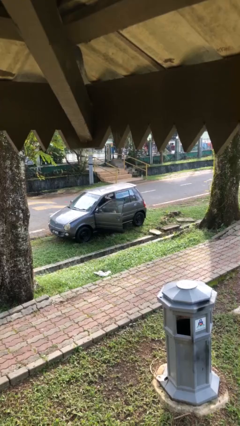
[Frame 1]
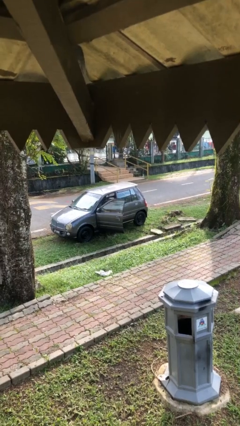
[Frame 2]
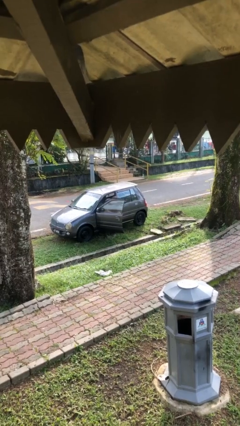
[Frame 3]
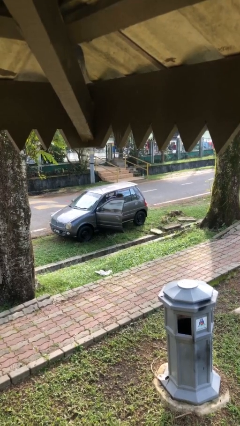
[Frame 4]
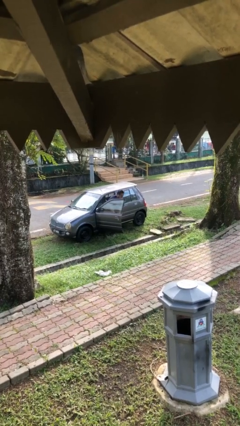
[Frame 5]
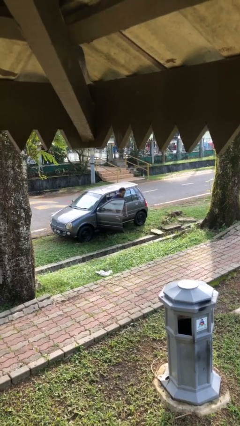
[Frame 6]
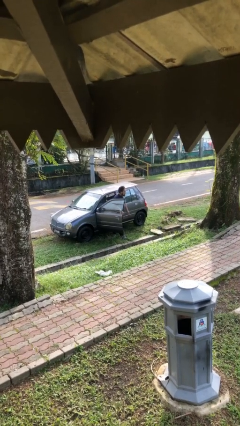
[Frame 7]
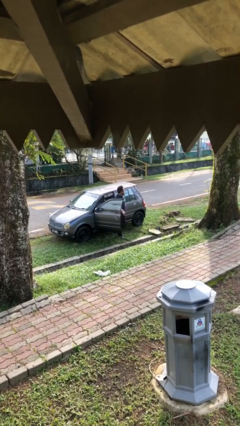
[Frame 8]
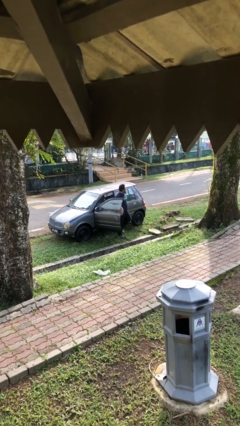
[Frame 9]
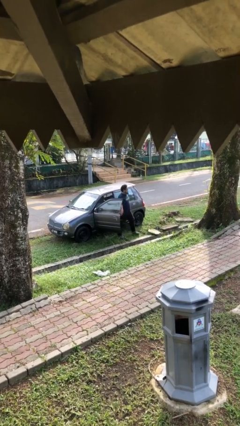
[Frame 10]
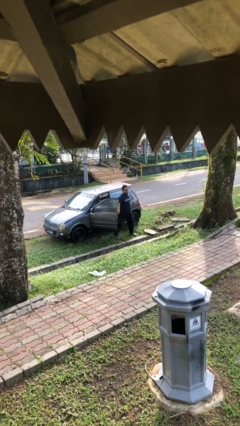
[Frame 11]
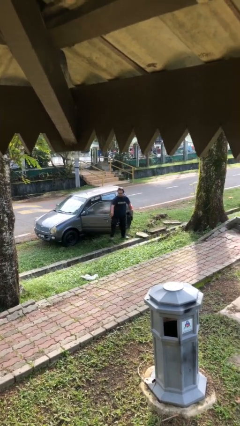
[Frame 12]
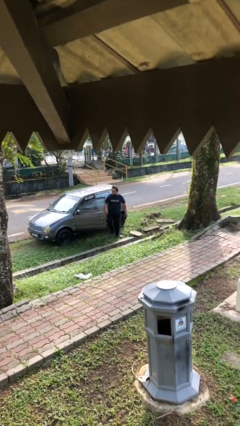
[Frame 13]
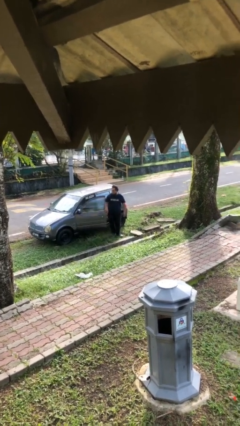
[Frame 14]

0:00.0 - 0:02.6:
person exits car

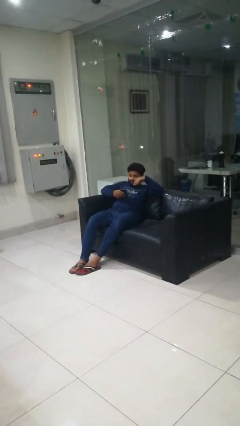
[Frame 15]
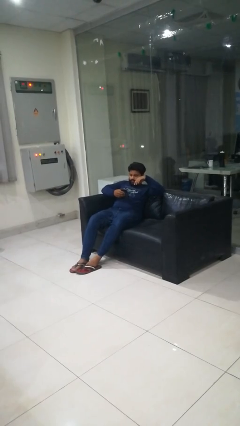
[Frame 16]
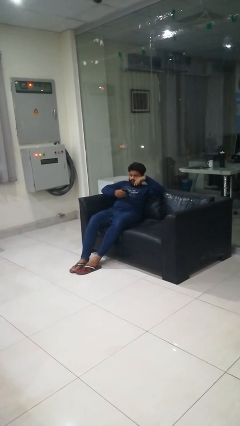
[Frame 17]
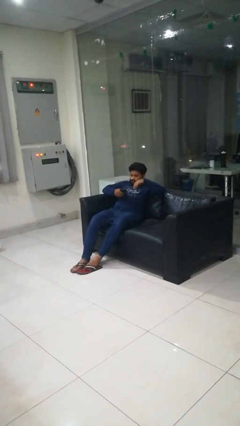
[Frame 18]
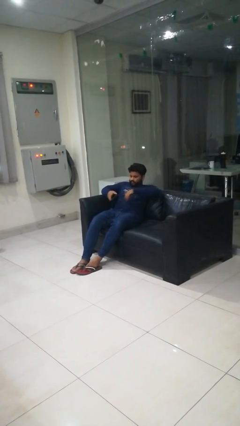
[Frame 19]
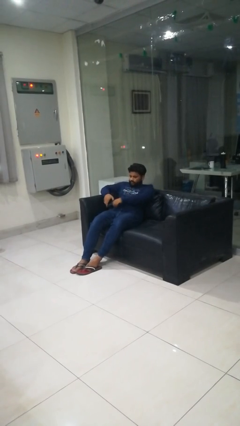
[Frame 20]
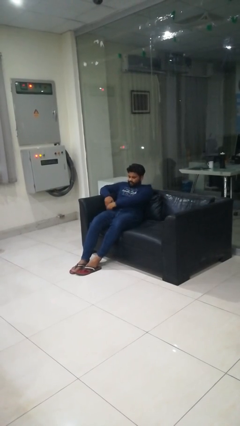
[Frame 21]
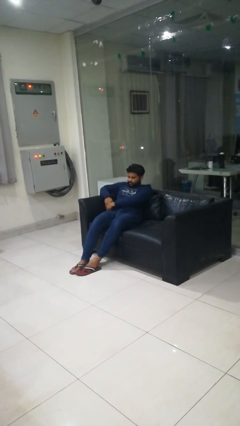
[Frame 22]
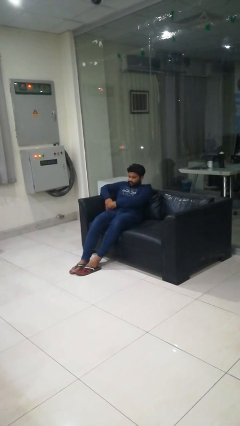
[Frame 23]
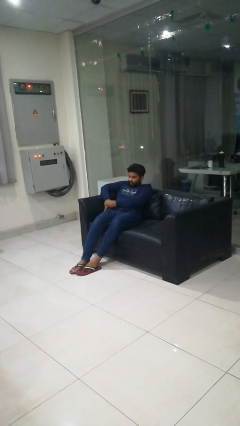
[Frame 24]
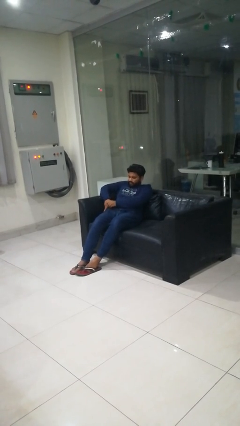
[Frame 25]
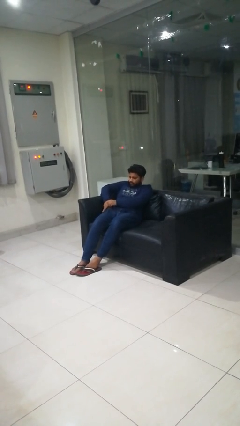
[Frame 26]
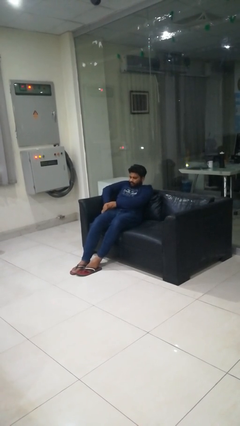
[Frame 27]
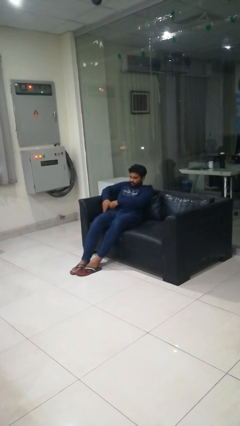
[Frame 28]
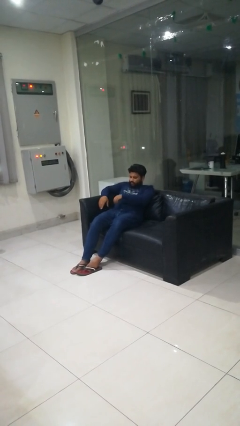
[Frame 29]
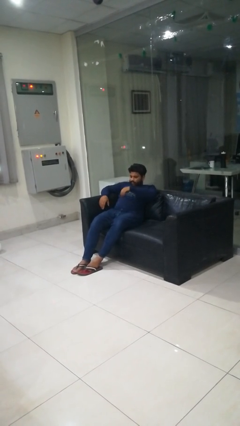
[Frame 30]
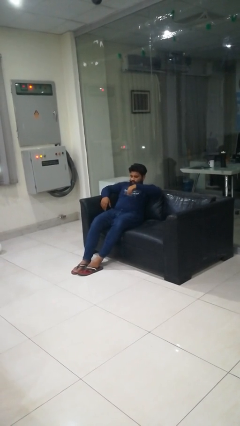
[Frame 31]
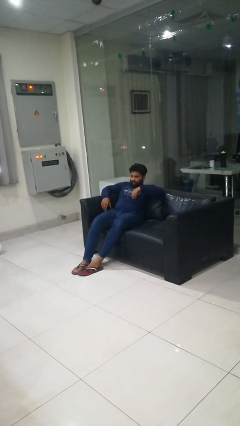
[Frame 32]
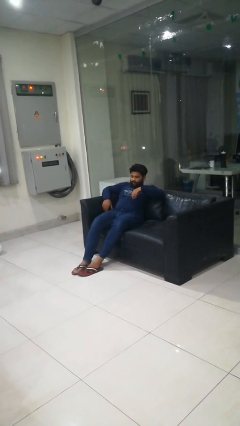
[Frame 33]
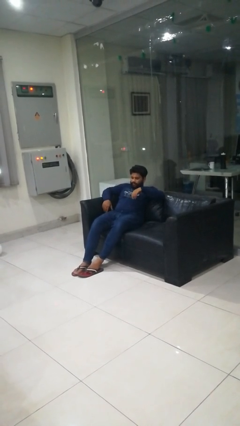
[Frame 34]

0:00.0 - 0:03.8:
person puts phone into pocket

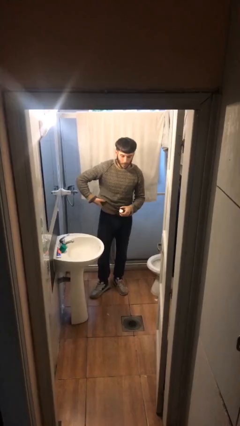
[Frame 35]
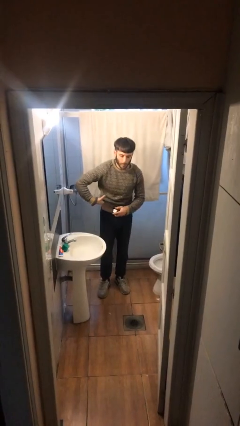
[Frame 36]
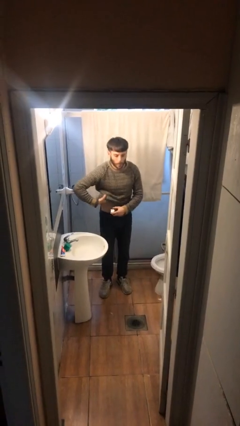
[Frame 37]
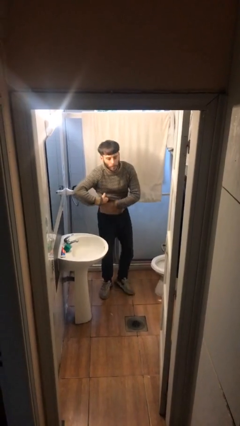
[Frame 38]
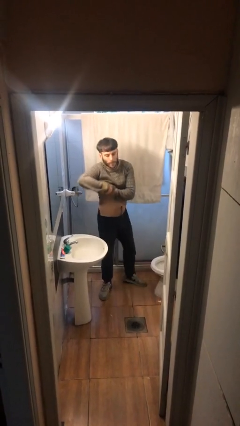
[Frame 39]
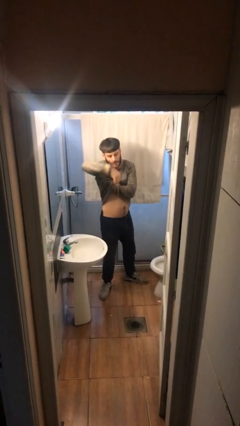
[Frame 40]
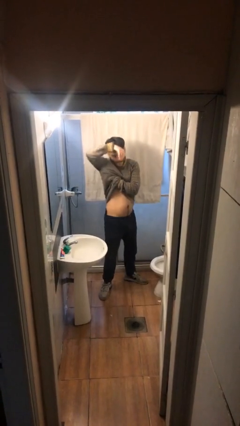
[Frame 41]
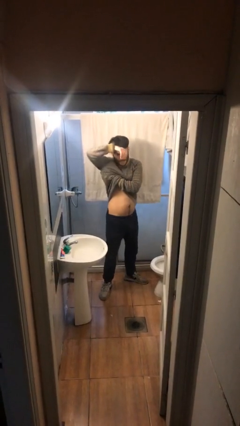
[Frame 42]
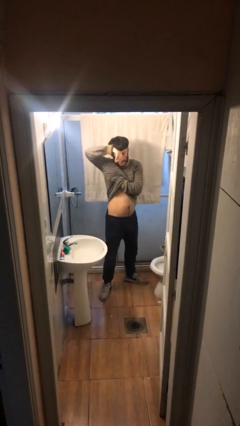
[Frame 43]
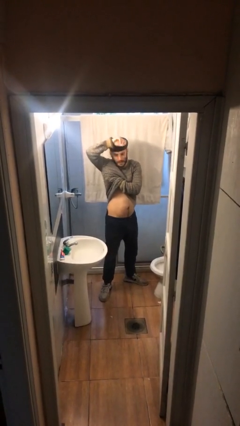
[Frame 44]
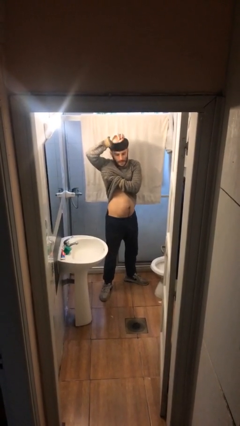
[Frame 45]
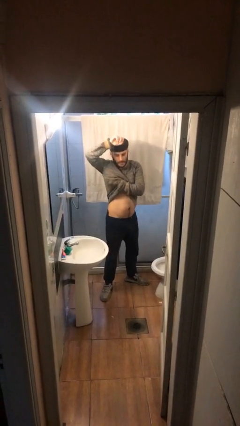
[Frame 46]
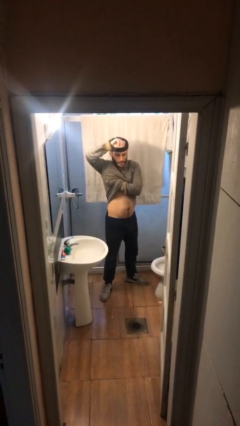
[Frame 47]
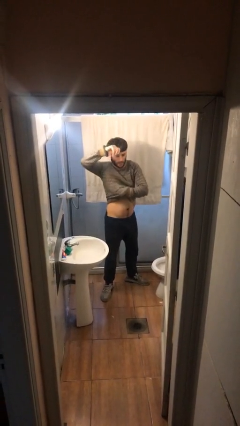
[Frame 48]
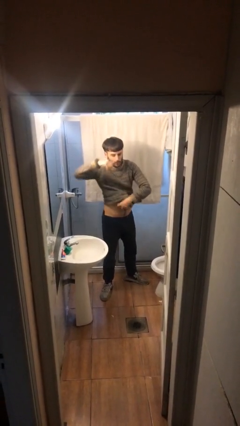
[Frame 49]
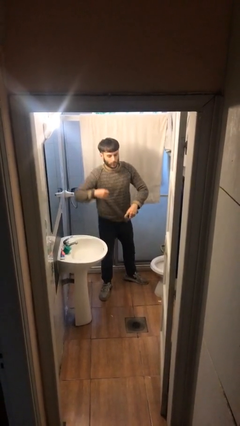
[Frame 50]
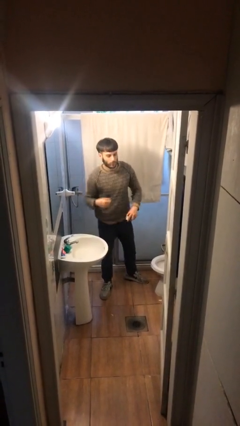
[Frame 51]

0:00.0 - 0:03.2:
person applies deodorant

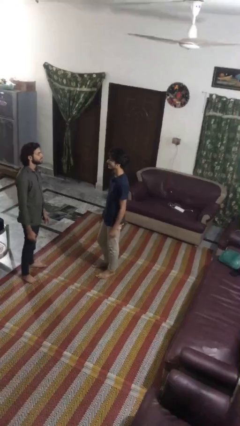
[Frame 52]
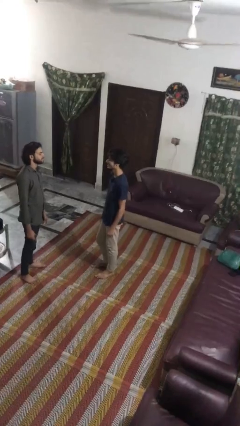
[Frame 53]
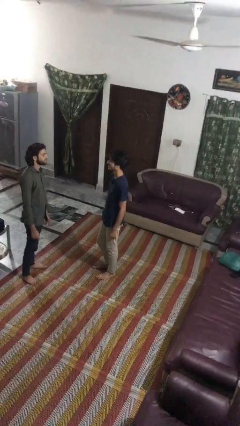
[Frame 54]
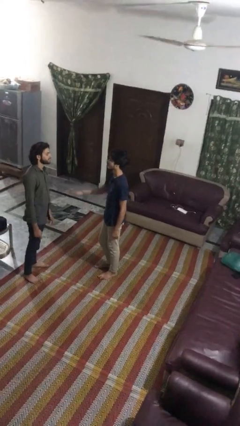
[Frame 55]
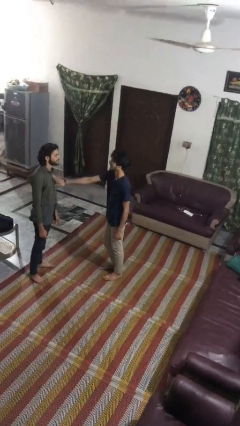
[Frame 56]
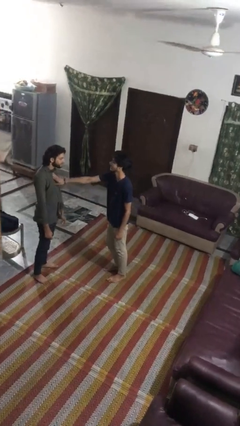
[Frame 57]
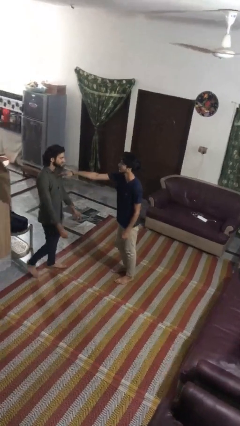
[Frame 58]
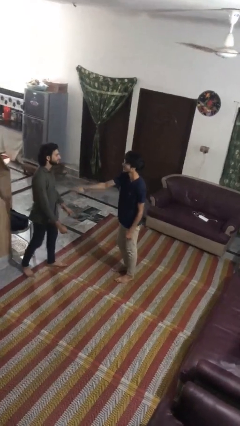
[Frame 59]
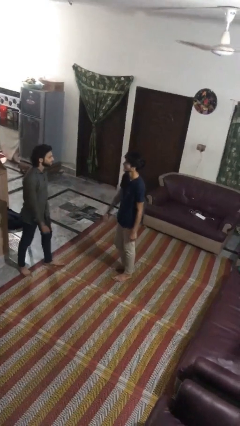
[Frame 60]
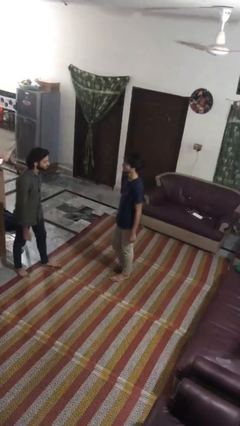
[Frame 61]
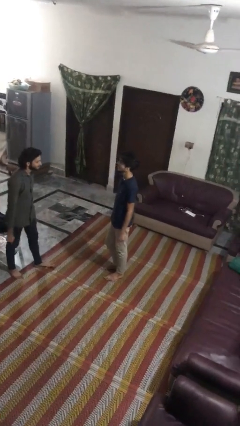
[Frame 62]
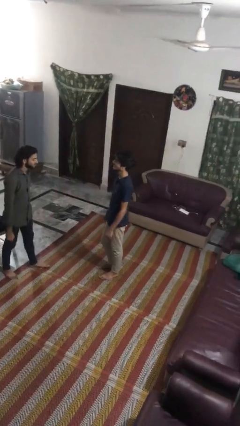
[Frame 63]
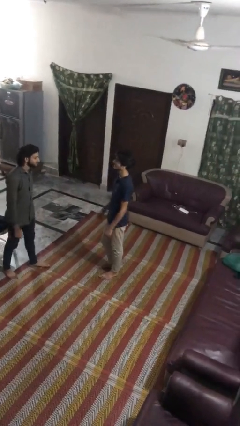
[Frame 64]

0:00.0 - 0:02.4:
person shoves person

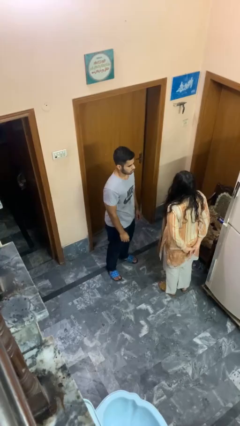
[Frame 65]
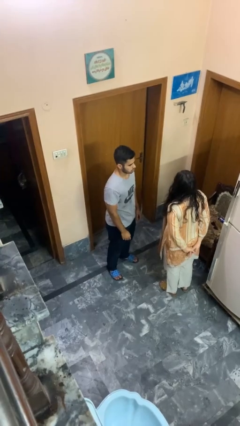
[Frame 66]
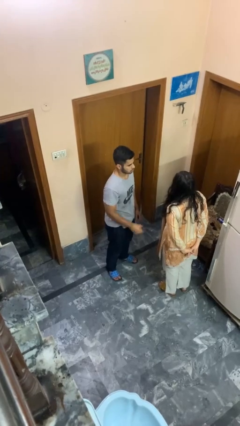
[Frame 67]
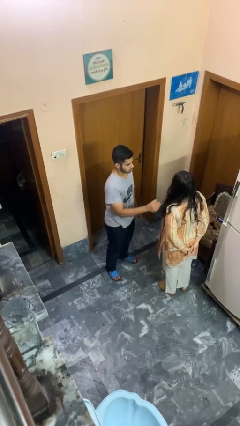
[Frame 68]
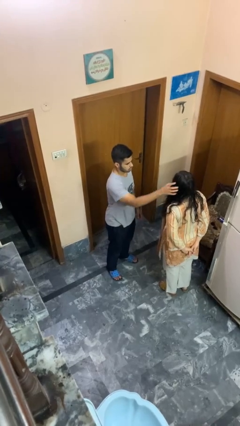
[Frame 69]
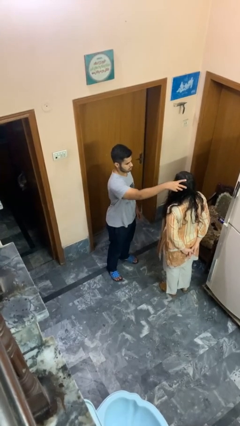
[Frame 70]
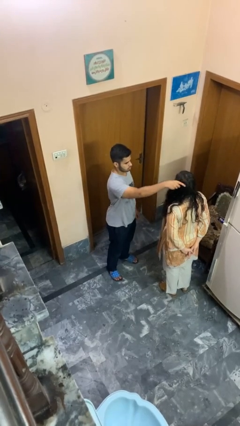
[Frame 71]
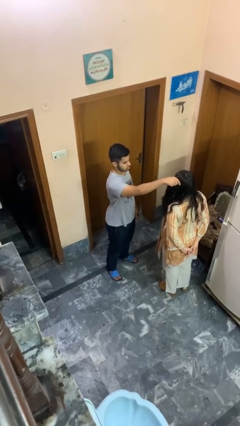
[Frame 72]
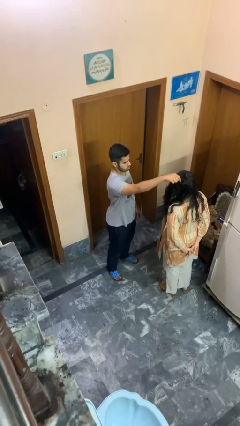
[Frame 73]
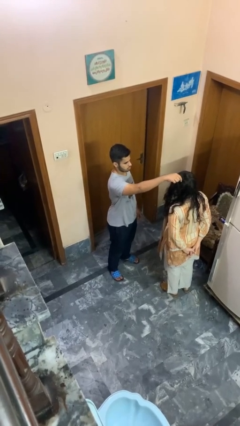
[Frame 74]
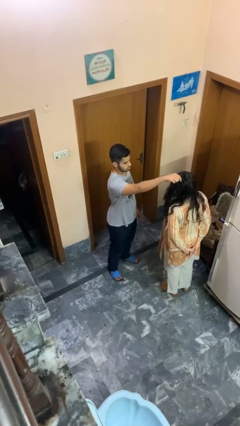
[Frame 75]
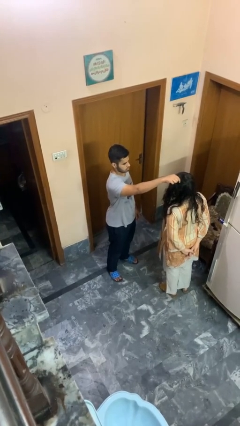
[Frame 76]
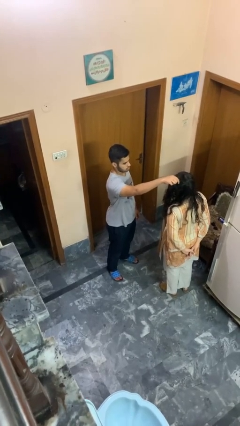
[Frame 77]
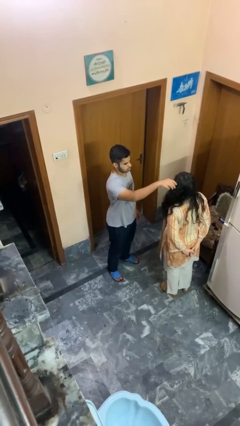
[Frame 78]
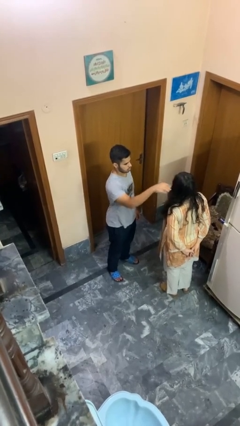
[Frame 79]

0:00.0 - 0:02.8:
person grabs person by hair

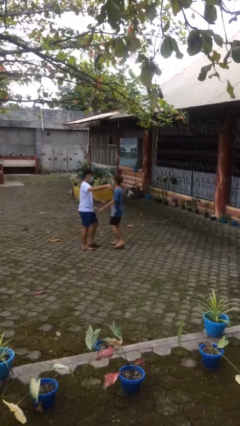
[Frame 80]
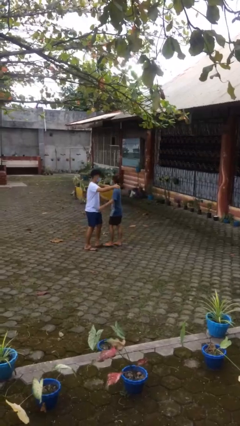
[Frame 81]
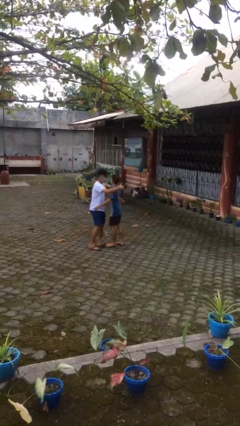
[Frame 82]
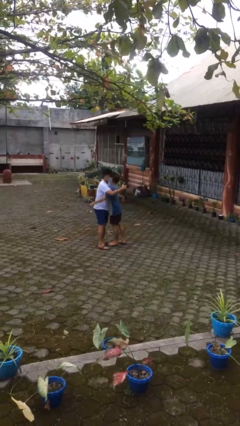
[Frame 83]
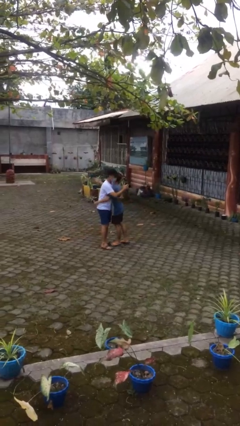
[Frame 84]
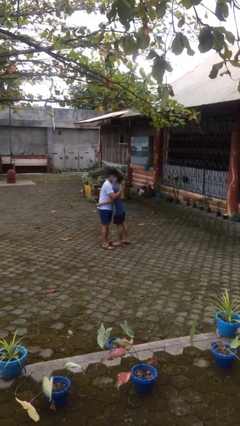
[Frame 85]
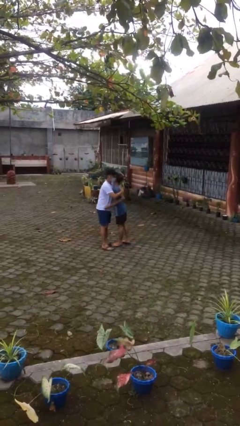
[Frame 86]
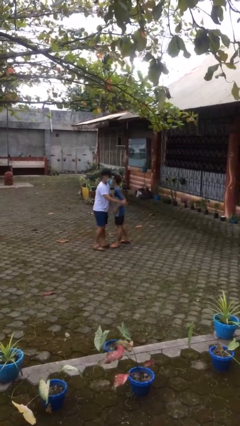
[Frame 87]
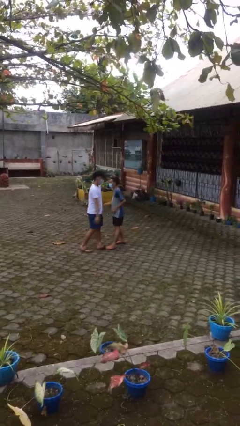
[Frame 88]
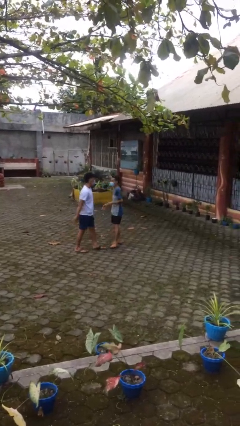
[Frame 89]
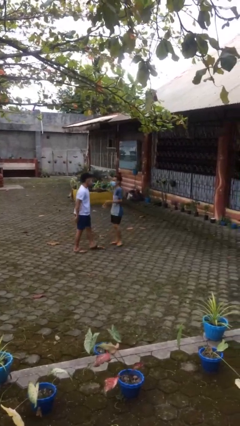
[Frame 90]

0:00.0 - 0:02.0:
person embraces person

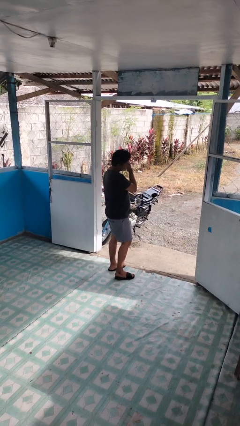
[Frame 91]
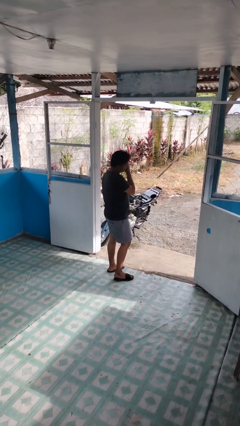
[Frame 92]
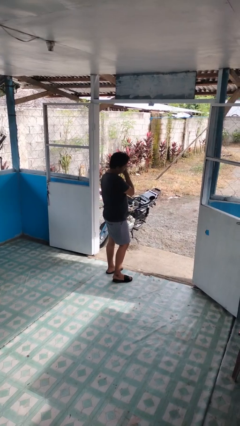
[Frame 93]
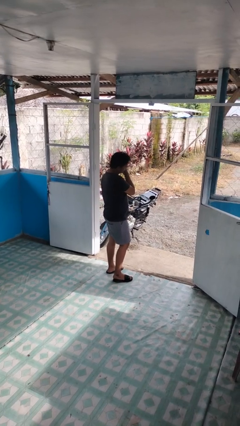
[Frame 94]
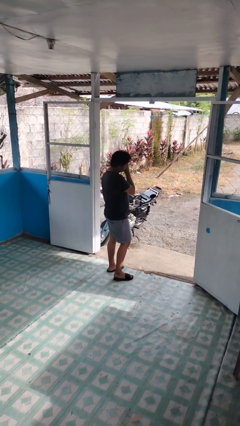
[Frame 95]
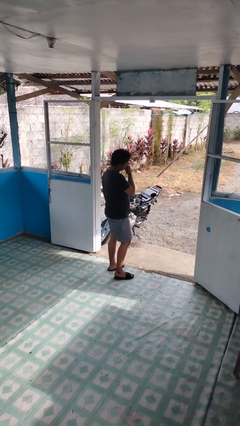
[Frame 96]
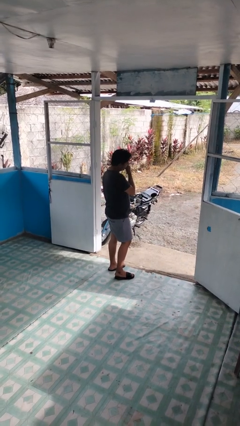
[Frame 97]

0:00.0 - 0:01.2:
person scratches face
